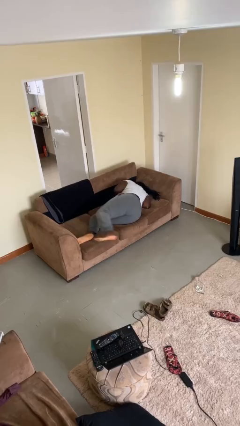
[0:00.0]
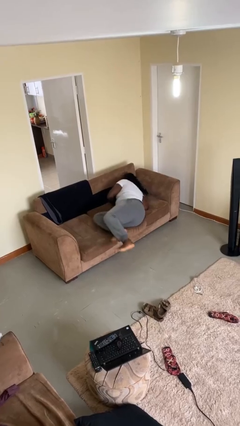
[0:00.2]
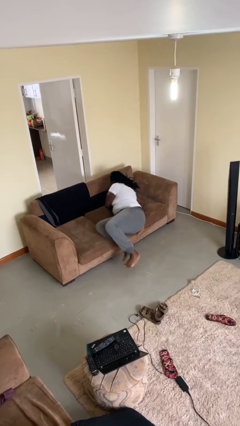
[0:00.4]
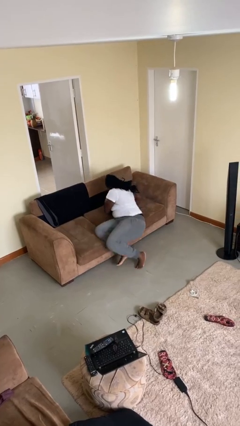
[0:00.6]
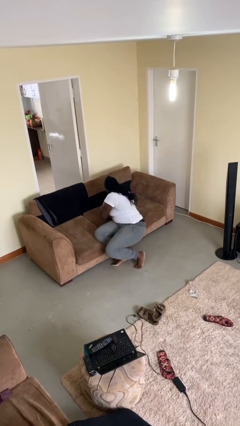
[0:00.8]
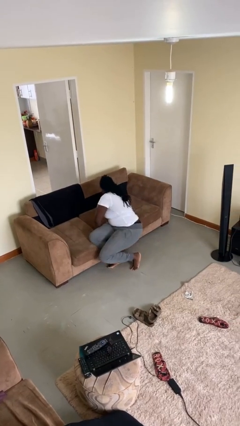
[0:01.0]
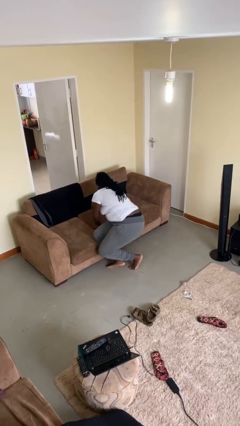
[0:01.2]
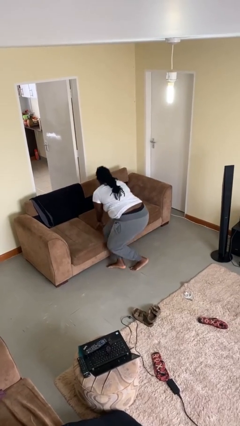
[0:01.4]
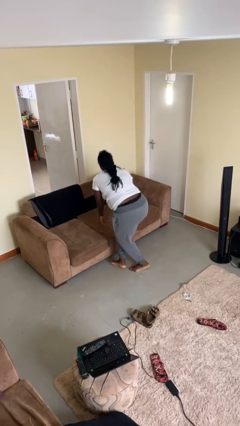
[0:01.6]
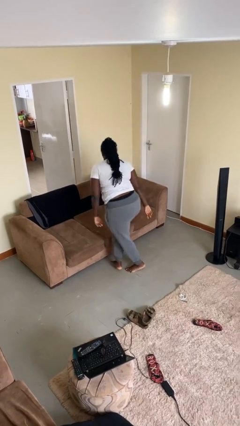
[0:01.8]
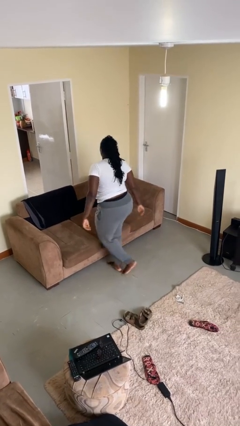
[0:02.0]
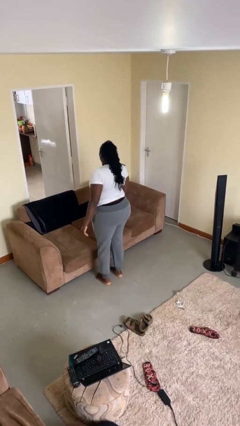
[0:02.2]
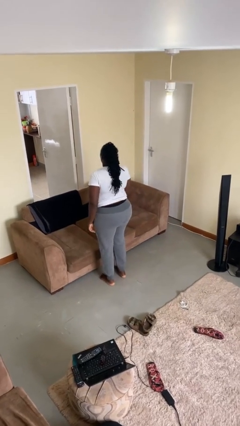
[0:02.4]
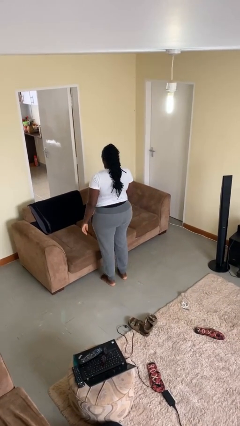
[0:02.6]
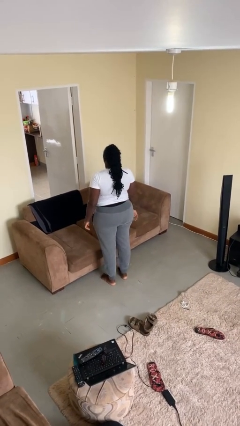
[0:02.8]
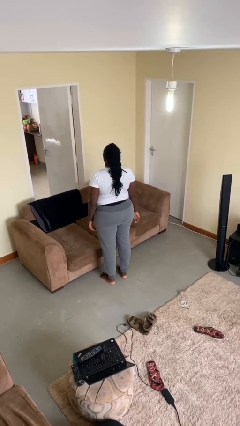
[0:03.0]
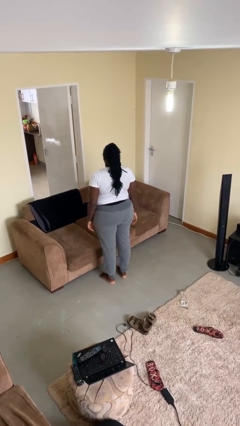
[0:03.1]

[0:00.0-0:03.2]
person stands up

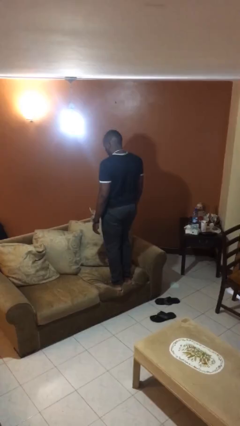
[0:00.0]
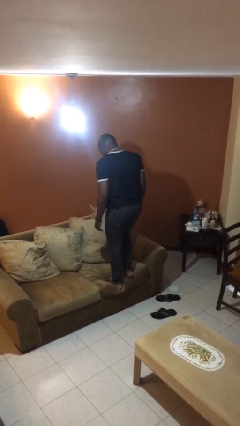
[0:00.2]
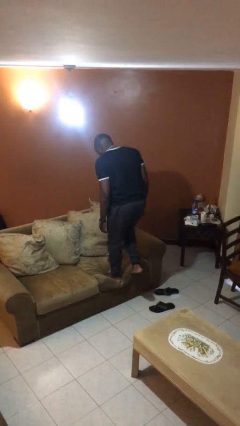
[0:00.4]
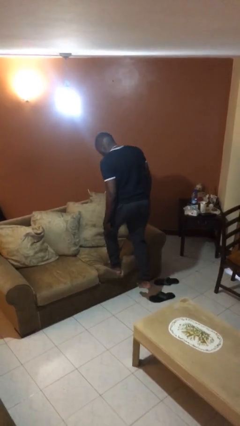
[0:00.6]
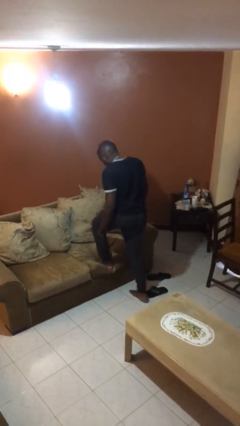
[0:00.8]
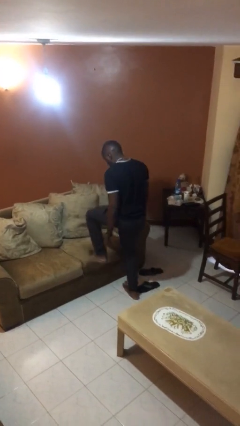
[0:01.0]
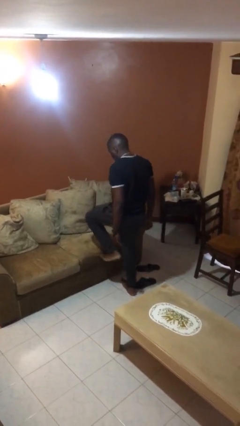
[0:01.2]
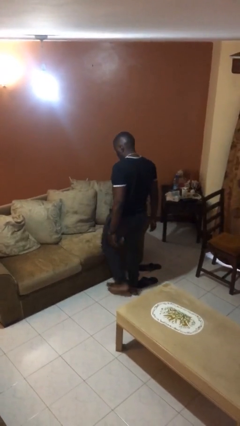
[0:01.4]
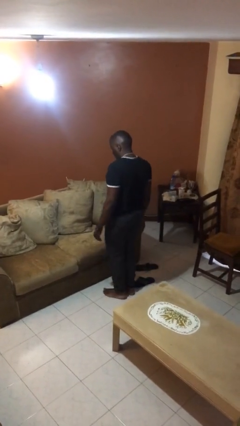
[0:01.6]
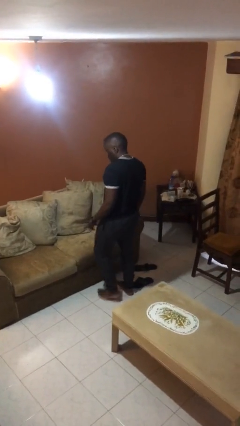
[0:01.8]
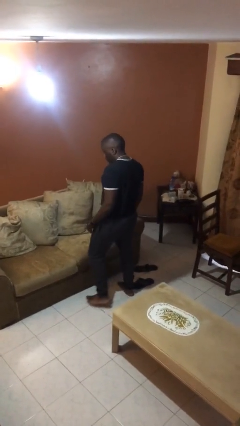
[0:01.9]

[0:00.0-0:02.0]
person climbs off couch

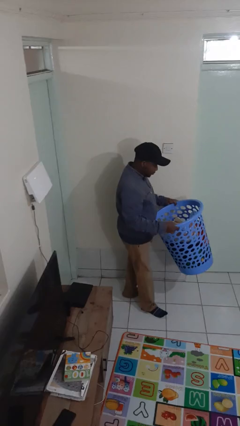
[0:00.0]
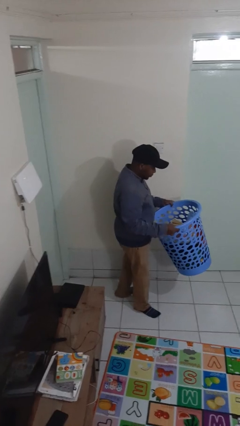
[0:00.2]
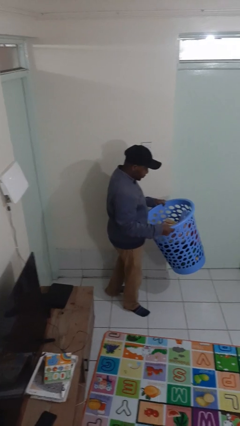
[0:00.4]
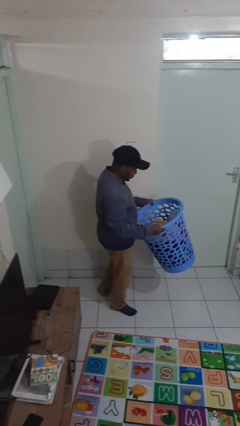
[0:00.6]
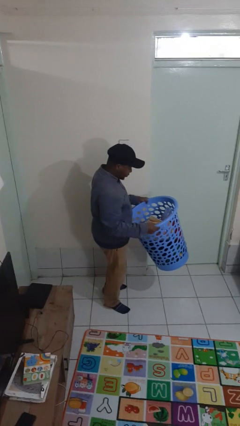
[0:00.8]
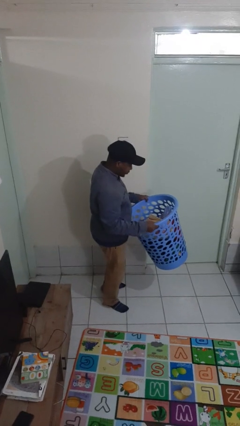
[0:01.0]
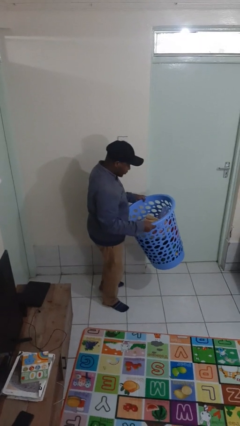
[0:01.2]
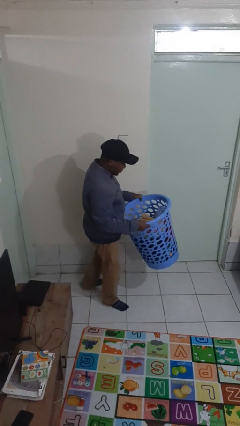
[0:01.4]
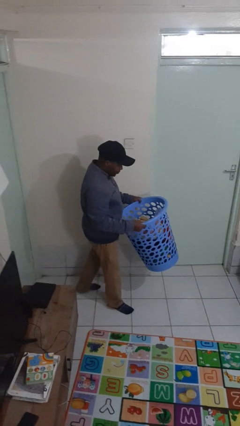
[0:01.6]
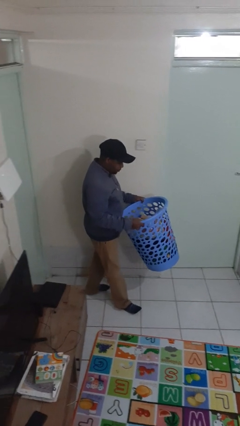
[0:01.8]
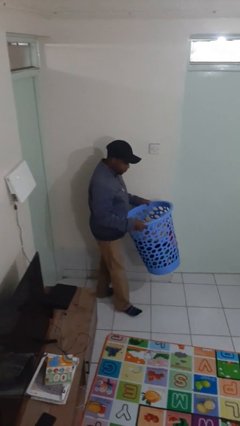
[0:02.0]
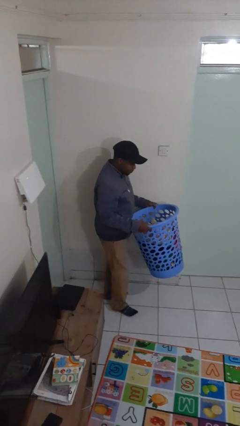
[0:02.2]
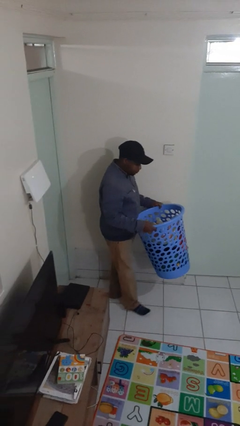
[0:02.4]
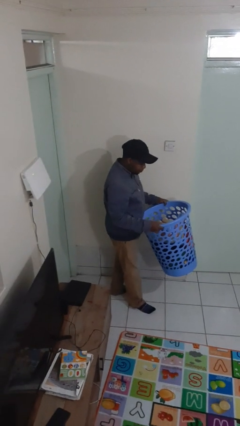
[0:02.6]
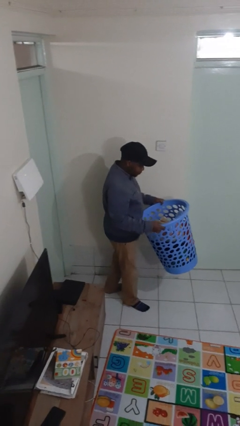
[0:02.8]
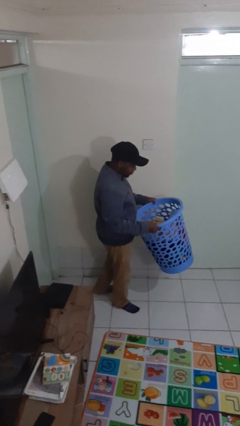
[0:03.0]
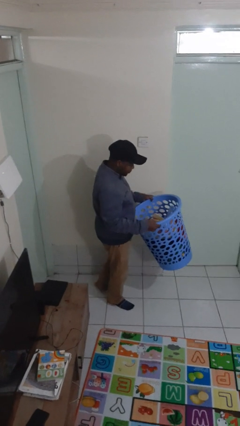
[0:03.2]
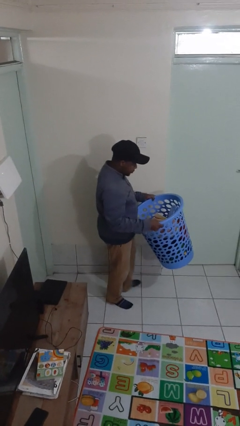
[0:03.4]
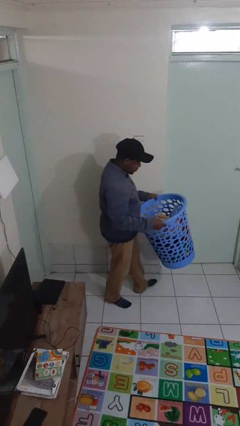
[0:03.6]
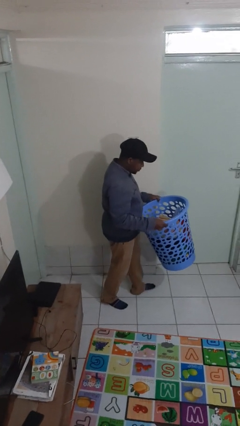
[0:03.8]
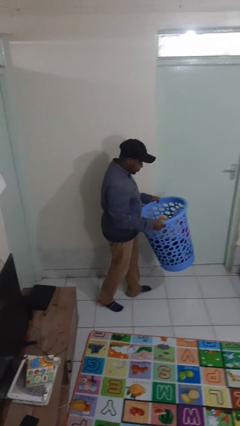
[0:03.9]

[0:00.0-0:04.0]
person carries laundry basket

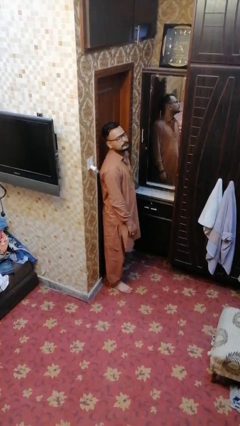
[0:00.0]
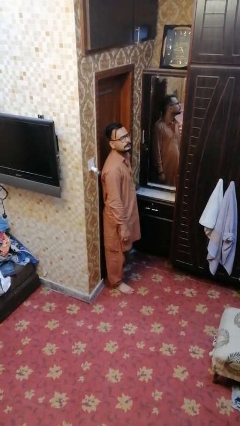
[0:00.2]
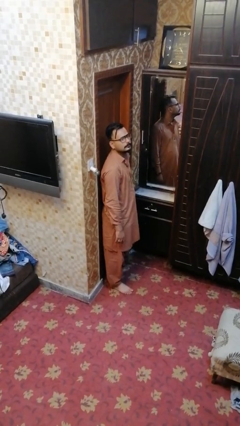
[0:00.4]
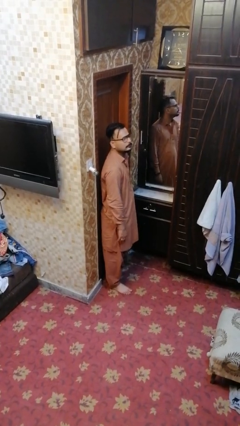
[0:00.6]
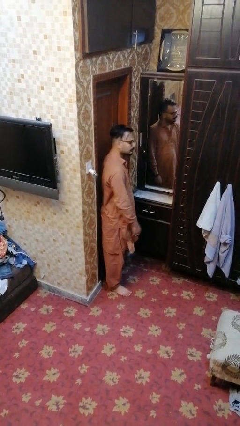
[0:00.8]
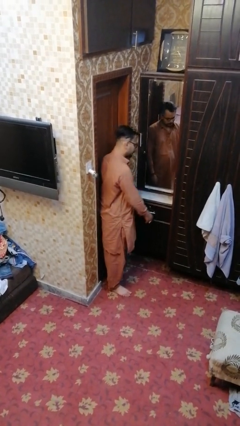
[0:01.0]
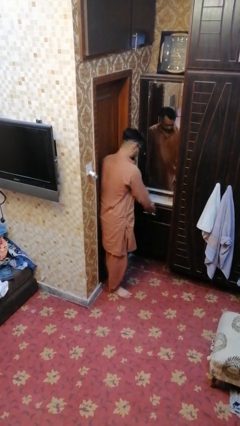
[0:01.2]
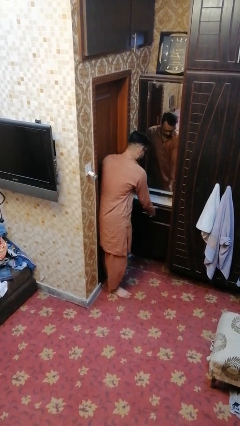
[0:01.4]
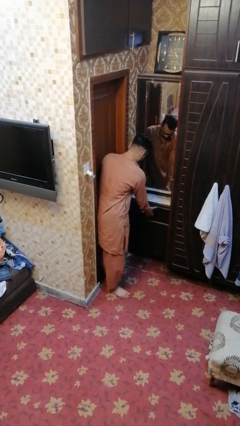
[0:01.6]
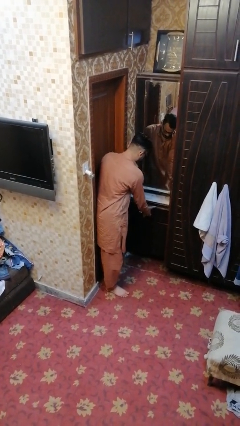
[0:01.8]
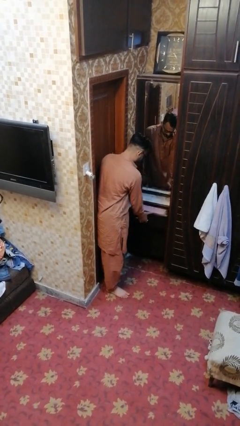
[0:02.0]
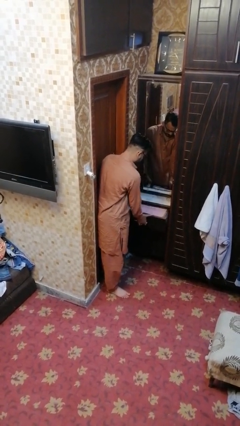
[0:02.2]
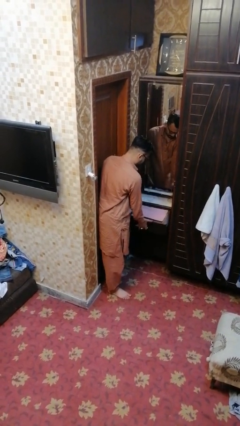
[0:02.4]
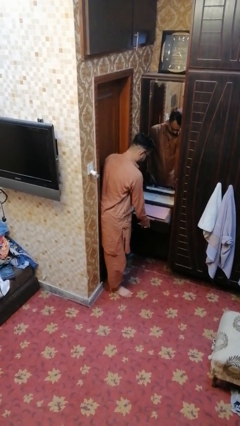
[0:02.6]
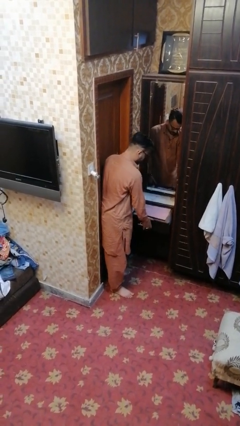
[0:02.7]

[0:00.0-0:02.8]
person opens dresser drawer

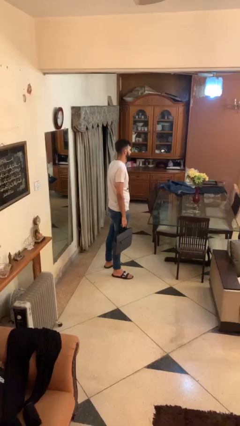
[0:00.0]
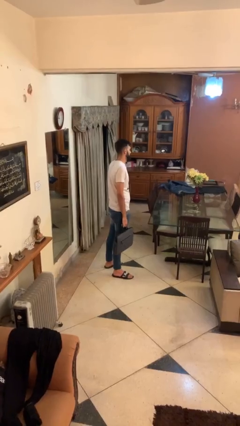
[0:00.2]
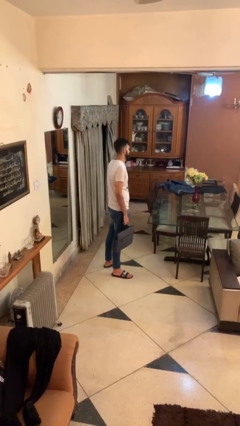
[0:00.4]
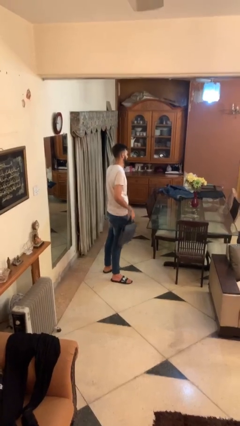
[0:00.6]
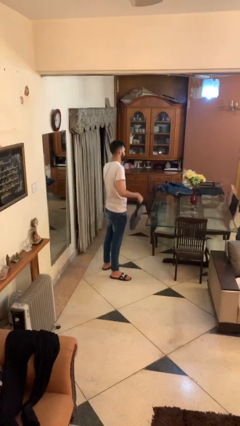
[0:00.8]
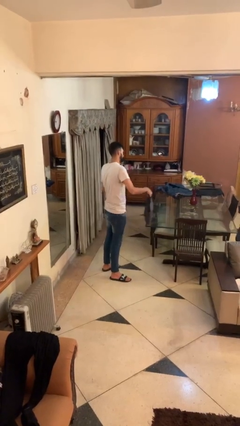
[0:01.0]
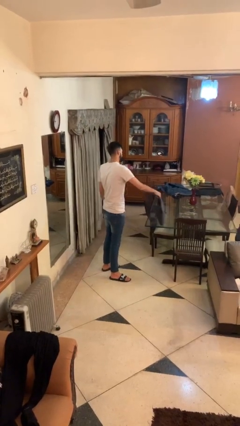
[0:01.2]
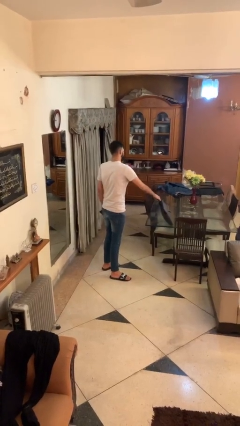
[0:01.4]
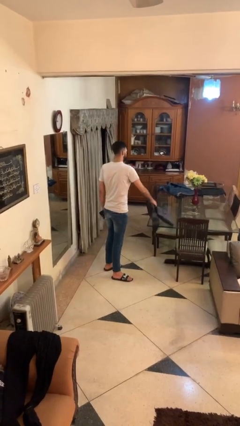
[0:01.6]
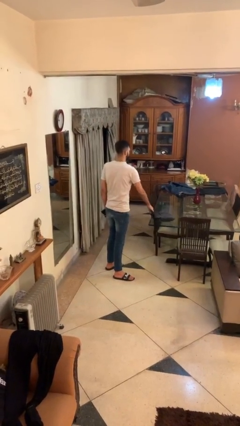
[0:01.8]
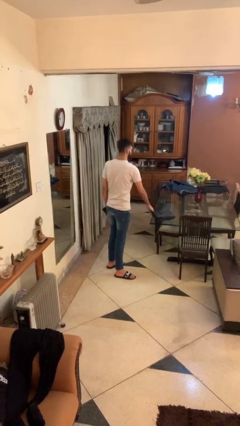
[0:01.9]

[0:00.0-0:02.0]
person puts down object on table

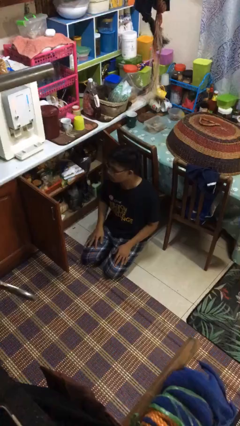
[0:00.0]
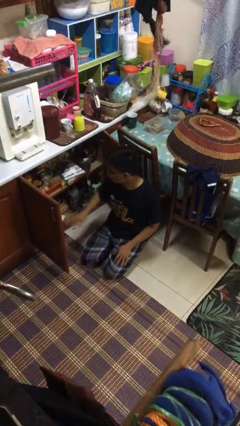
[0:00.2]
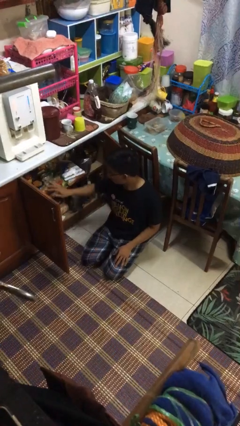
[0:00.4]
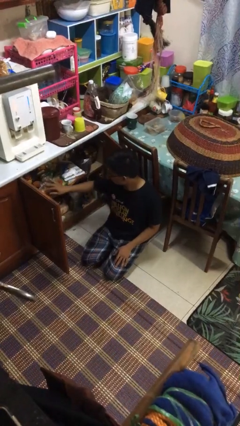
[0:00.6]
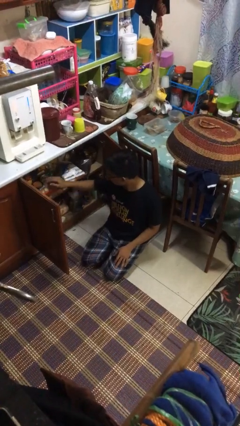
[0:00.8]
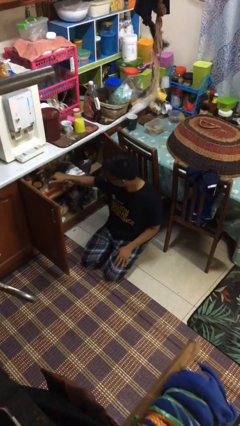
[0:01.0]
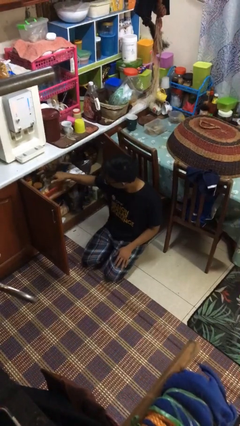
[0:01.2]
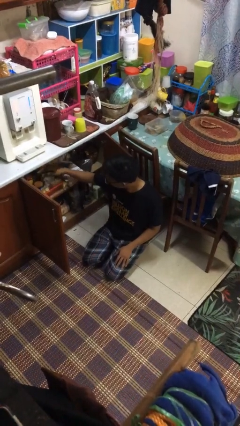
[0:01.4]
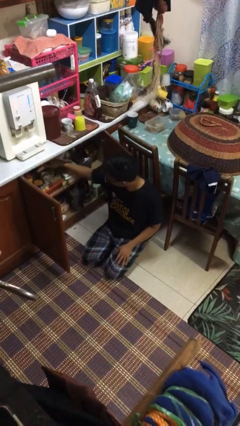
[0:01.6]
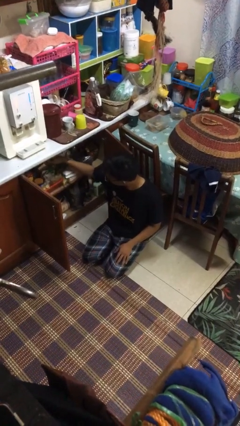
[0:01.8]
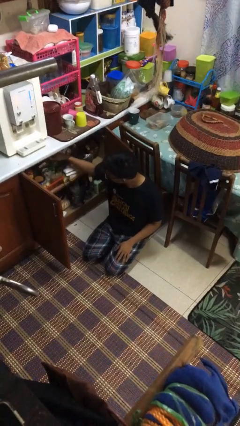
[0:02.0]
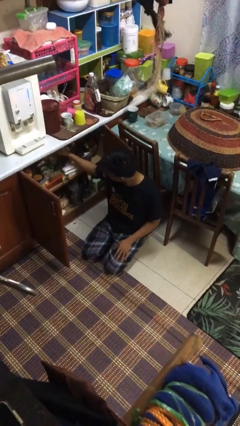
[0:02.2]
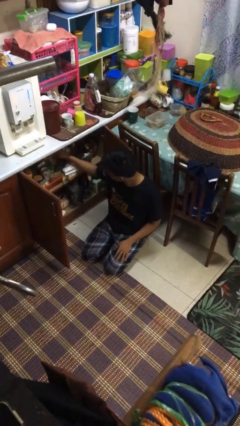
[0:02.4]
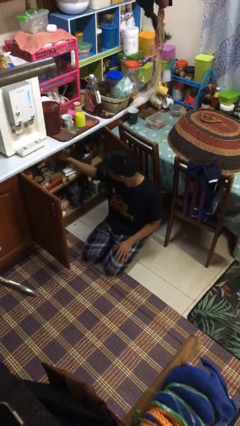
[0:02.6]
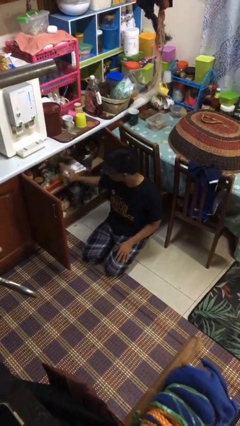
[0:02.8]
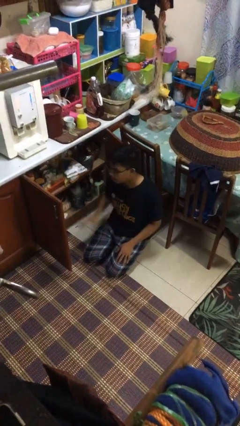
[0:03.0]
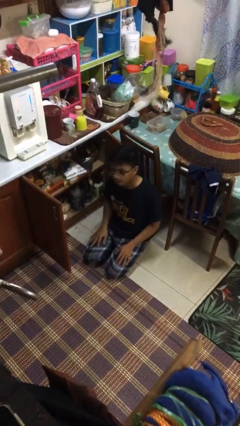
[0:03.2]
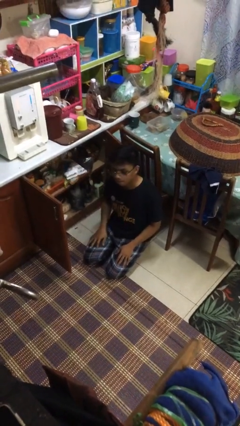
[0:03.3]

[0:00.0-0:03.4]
person searches in kitchen drawer
